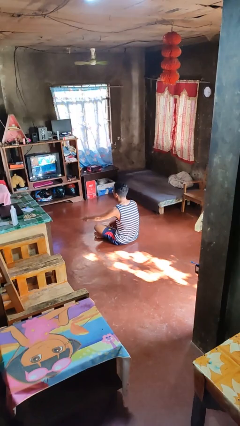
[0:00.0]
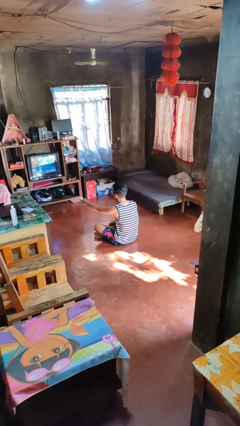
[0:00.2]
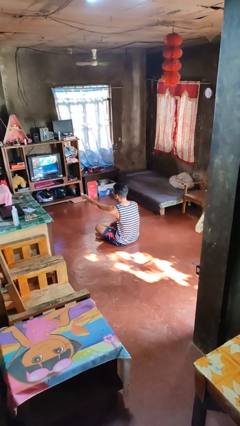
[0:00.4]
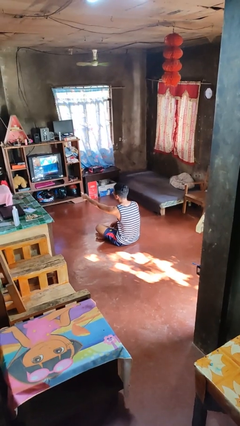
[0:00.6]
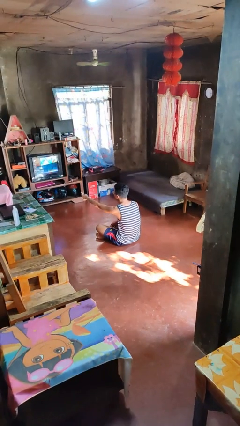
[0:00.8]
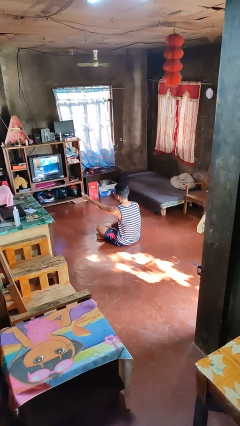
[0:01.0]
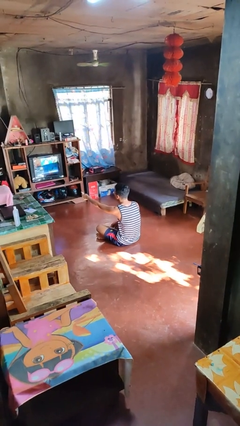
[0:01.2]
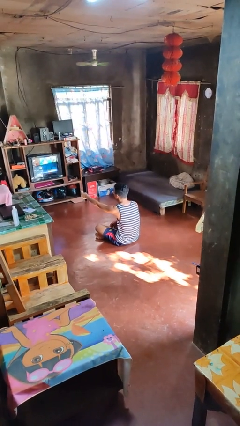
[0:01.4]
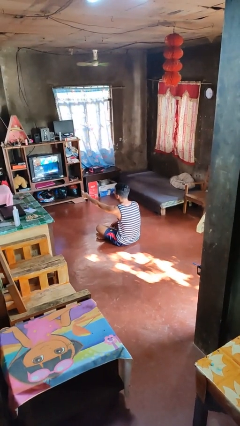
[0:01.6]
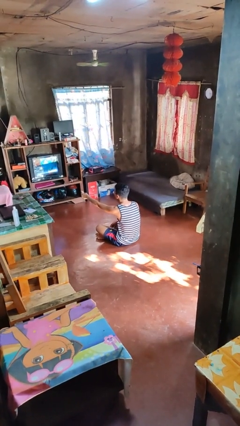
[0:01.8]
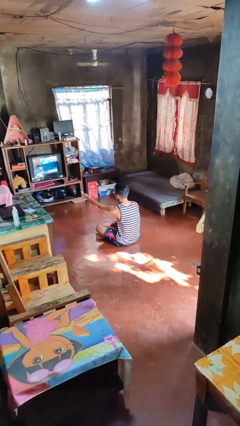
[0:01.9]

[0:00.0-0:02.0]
person uses television remote

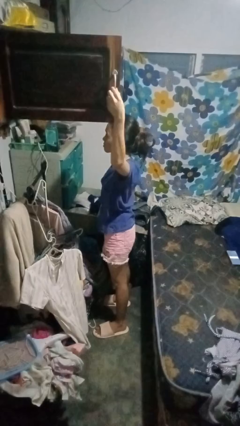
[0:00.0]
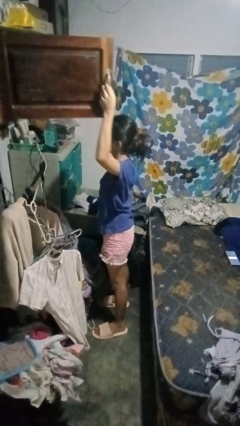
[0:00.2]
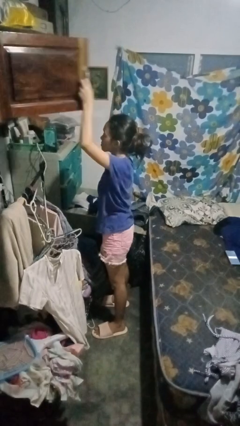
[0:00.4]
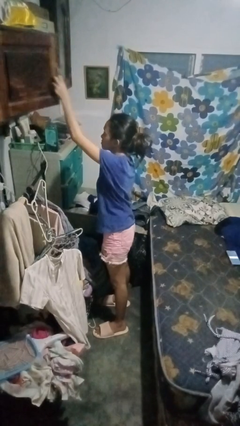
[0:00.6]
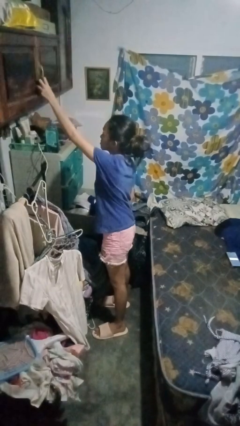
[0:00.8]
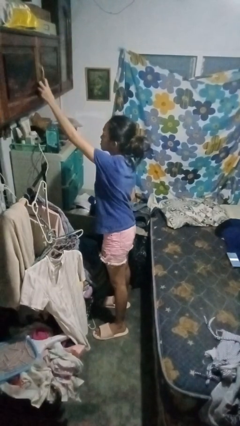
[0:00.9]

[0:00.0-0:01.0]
person closes closet door

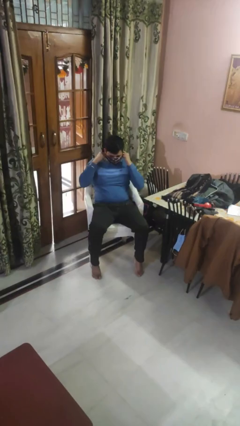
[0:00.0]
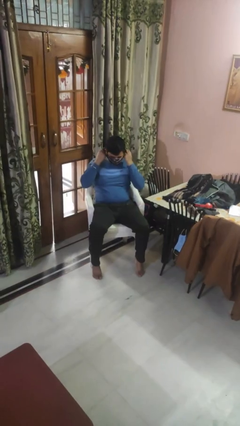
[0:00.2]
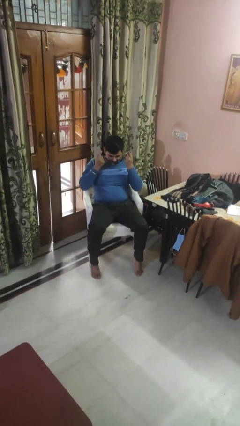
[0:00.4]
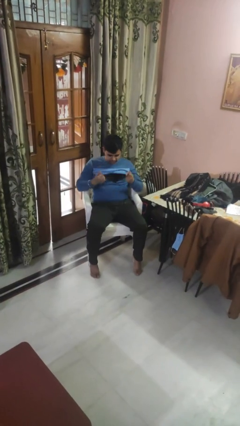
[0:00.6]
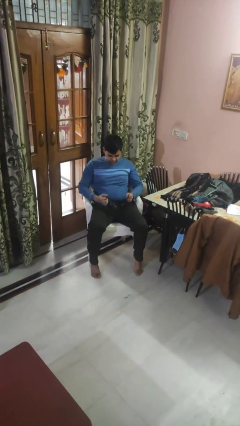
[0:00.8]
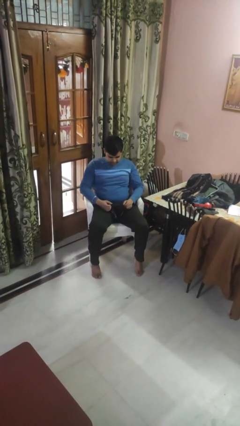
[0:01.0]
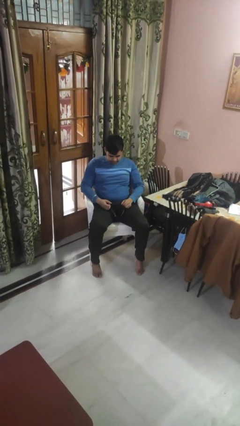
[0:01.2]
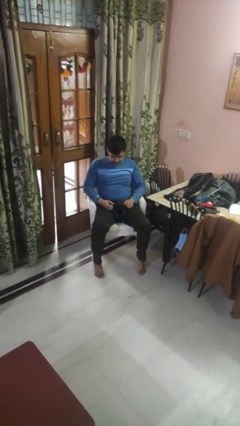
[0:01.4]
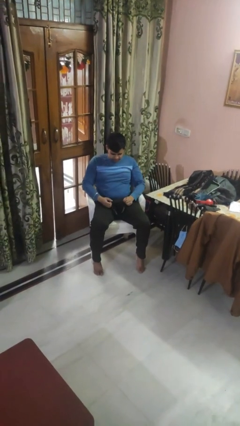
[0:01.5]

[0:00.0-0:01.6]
person takes off facemask

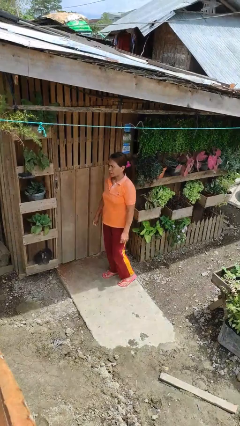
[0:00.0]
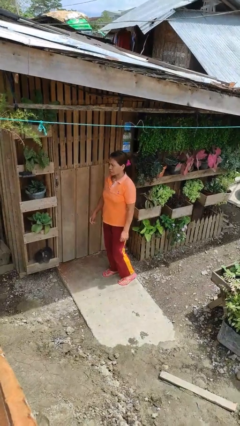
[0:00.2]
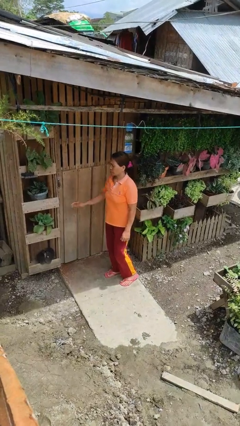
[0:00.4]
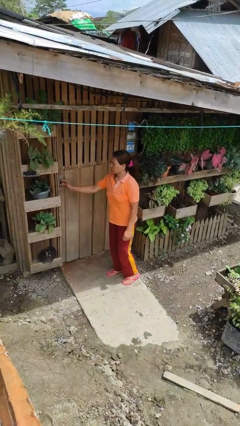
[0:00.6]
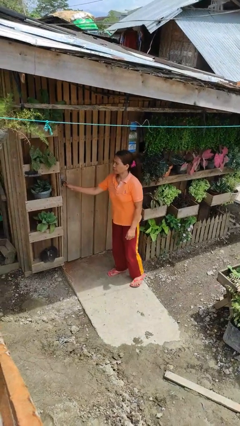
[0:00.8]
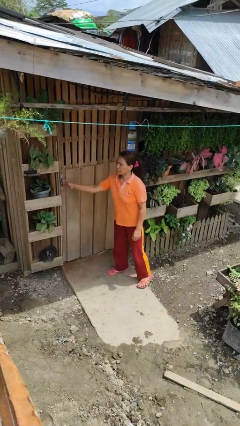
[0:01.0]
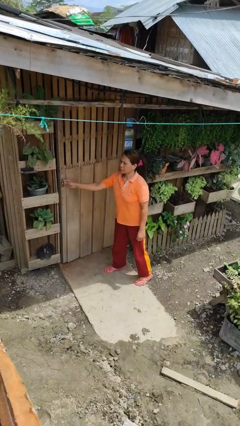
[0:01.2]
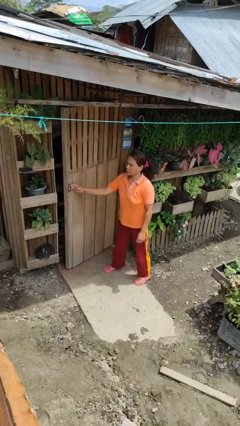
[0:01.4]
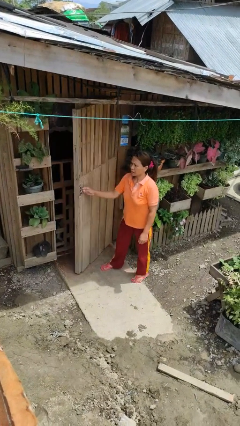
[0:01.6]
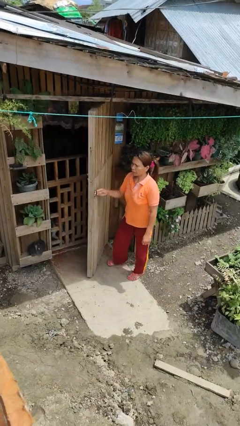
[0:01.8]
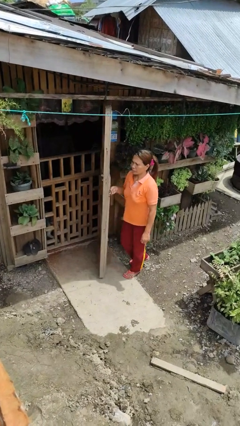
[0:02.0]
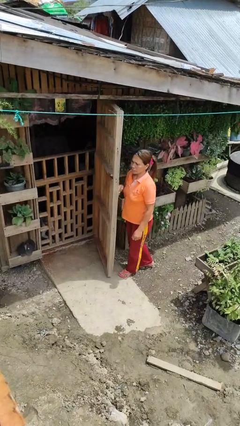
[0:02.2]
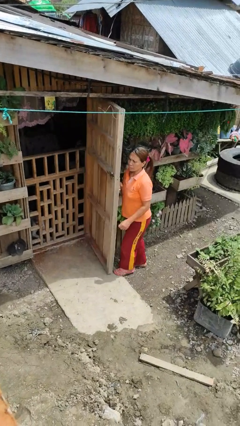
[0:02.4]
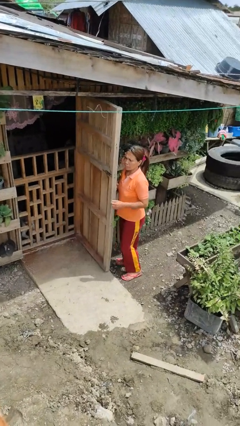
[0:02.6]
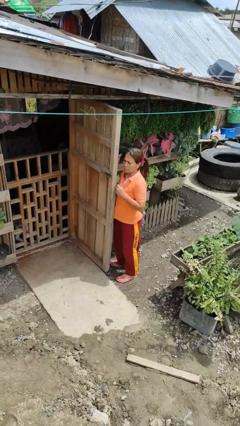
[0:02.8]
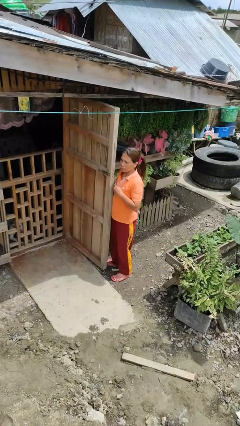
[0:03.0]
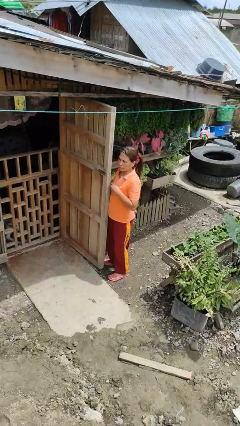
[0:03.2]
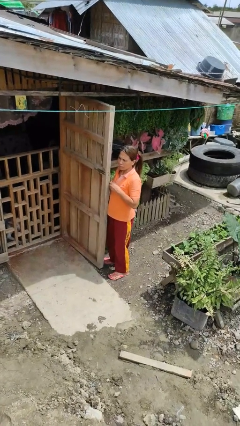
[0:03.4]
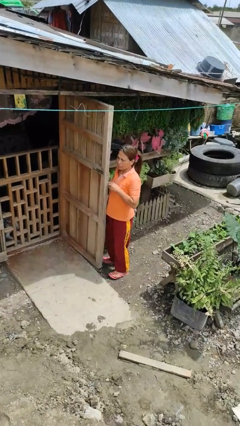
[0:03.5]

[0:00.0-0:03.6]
person opens facility door

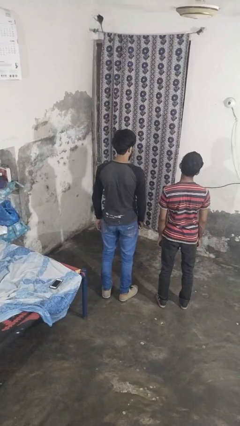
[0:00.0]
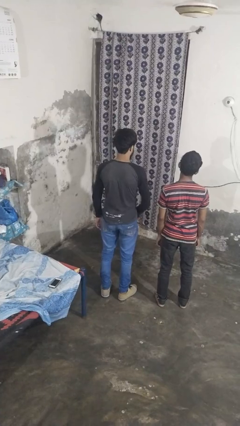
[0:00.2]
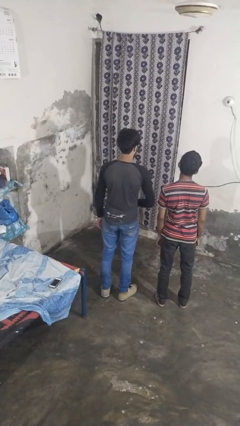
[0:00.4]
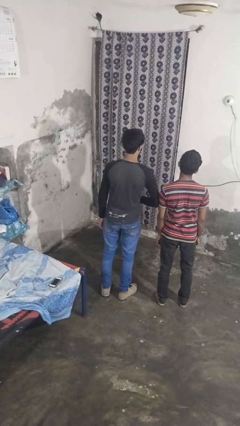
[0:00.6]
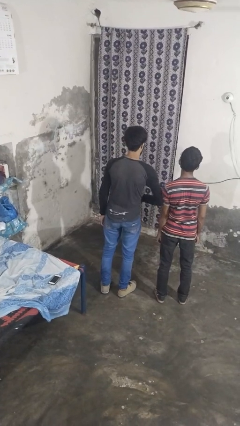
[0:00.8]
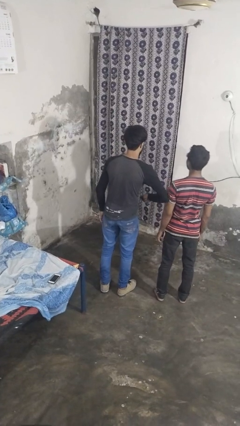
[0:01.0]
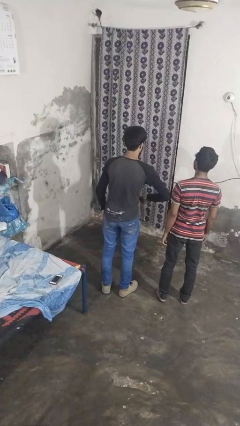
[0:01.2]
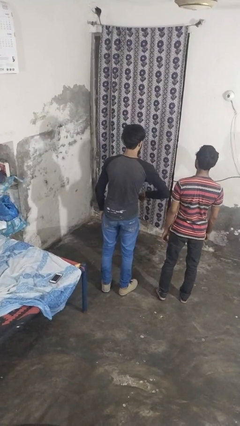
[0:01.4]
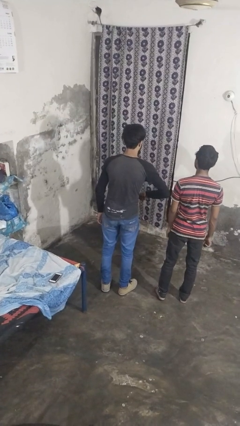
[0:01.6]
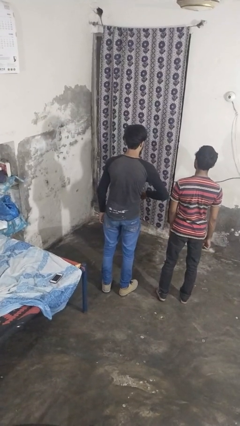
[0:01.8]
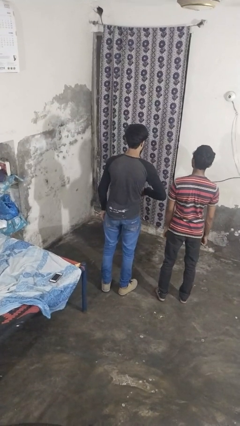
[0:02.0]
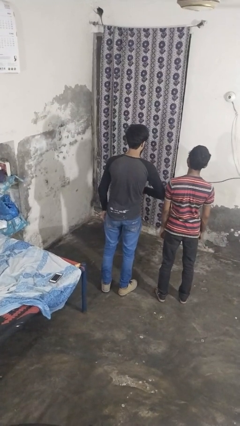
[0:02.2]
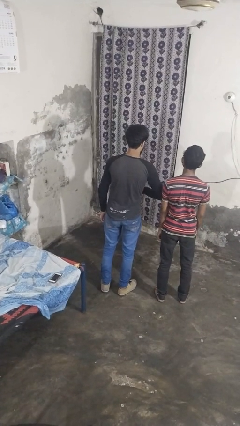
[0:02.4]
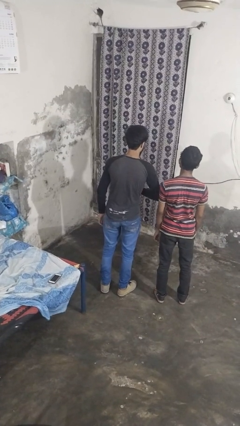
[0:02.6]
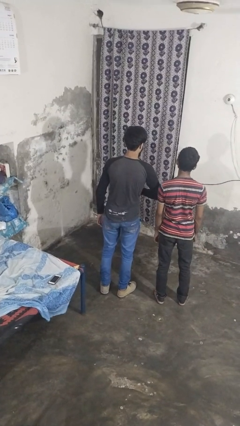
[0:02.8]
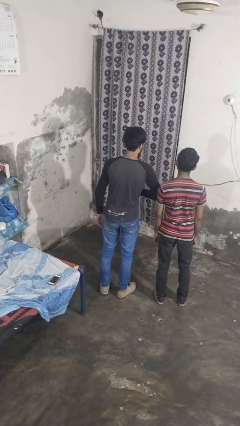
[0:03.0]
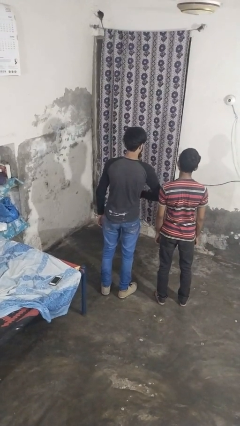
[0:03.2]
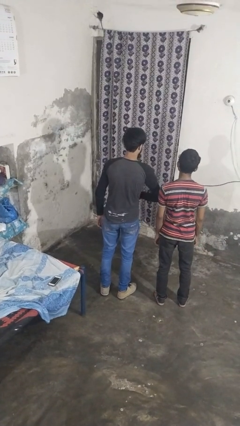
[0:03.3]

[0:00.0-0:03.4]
person nudges person with elbow

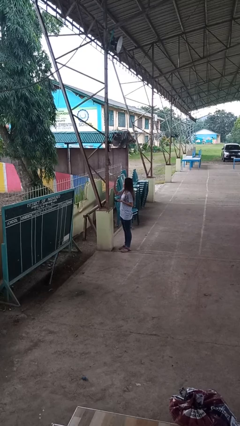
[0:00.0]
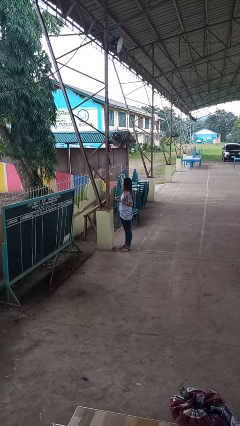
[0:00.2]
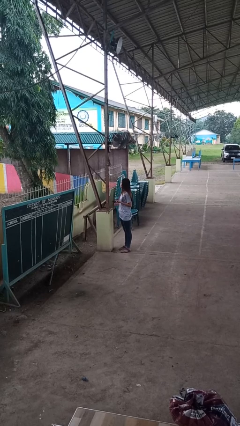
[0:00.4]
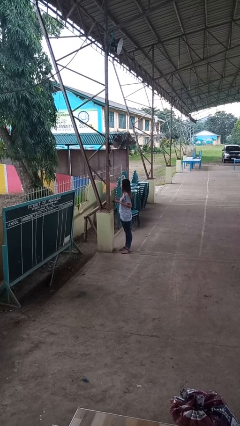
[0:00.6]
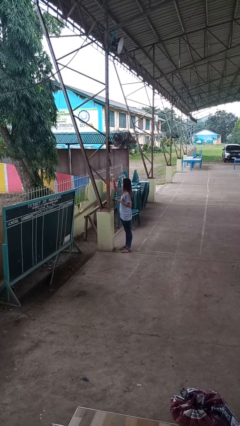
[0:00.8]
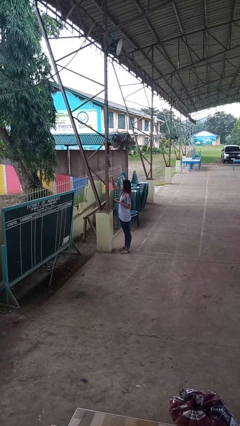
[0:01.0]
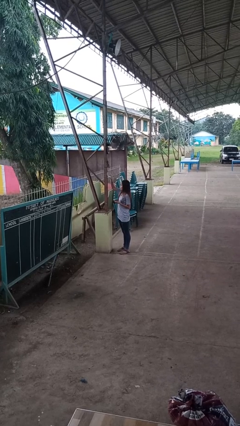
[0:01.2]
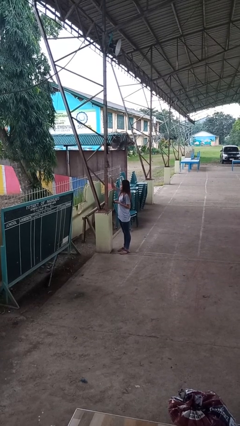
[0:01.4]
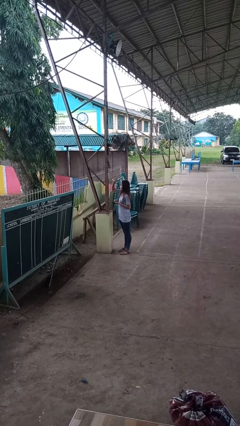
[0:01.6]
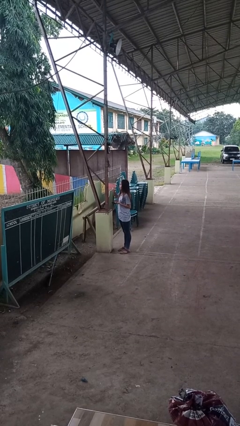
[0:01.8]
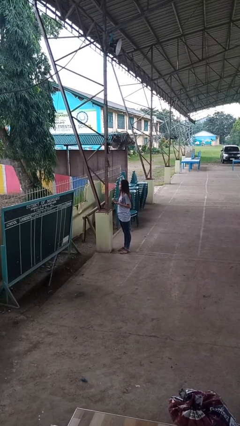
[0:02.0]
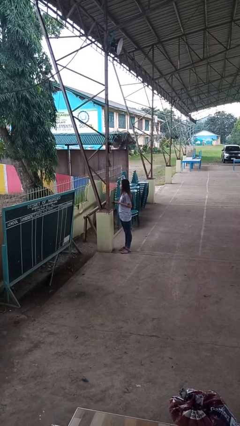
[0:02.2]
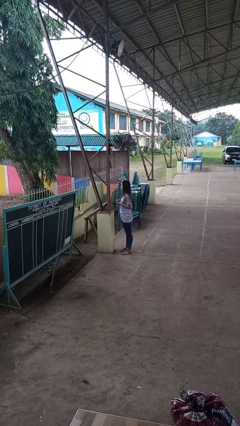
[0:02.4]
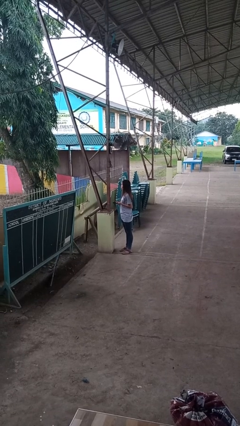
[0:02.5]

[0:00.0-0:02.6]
person unplugs from electrical socket

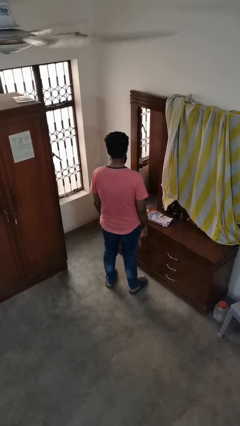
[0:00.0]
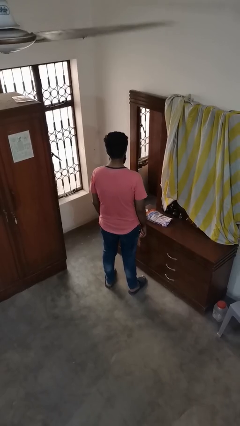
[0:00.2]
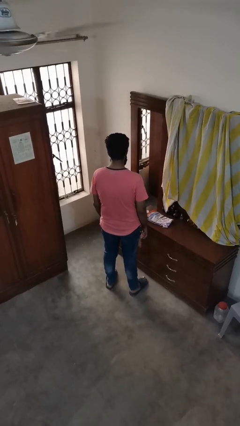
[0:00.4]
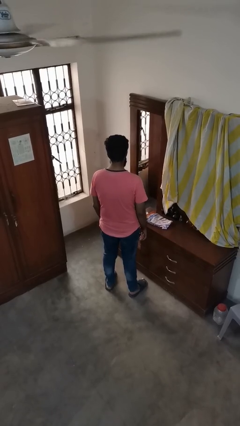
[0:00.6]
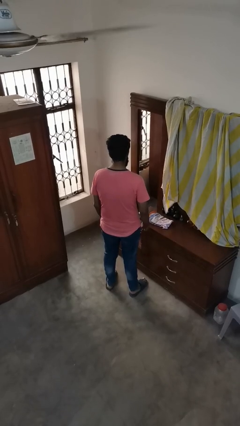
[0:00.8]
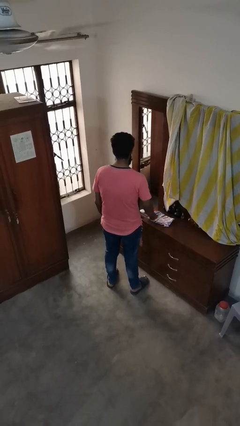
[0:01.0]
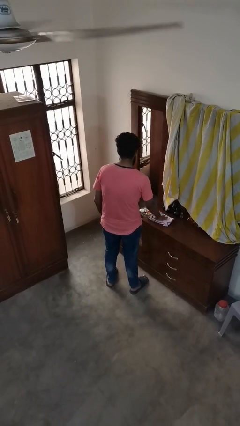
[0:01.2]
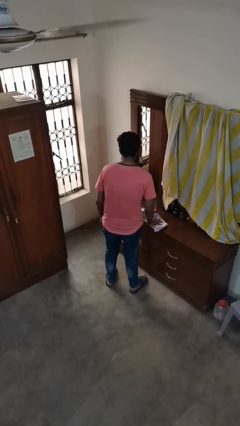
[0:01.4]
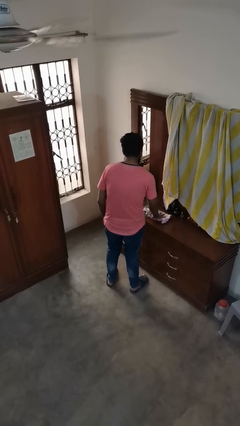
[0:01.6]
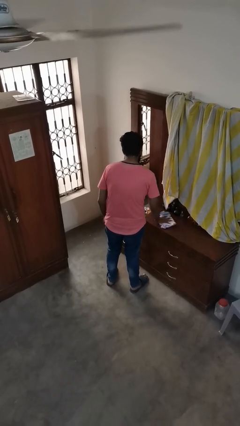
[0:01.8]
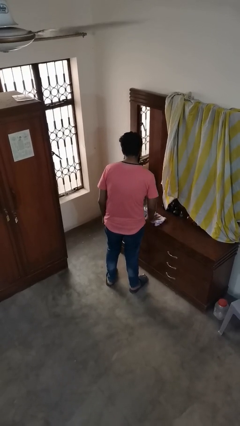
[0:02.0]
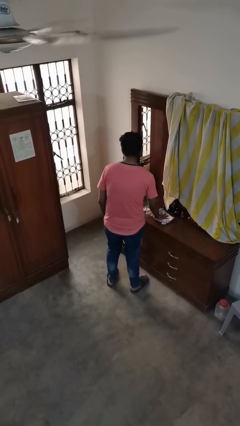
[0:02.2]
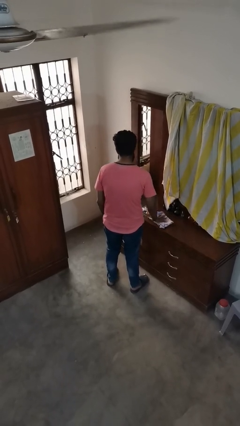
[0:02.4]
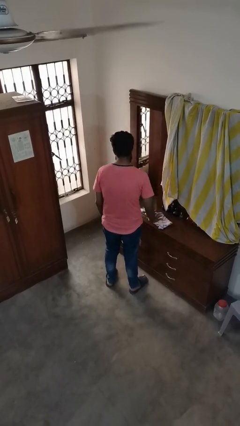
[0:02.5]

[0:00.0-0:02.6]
person cleans table with rag

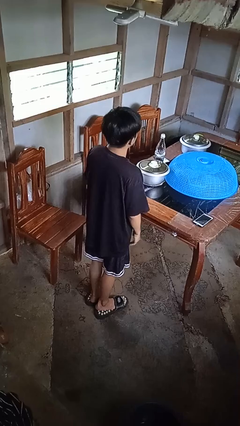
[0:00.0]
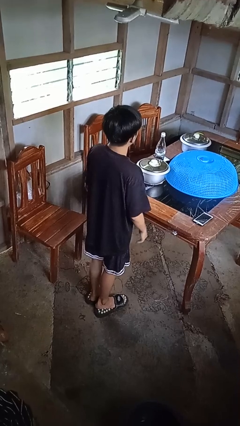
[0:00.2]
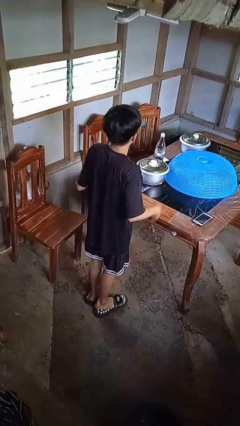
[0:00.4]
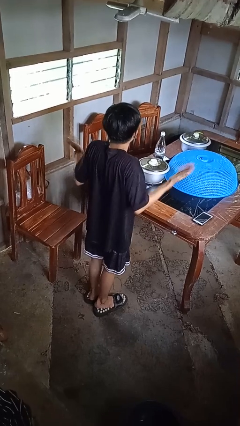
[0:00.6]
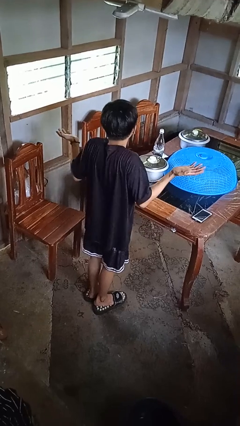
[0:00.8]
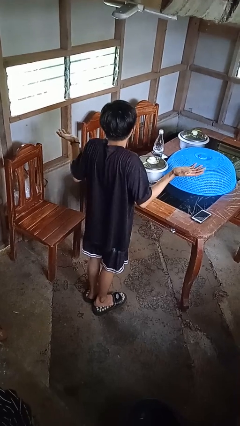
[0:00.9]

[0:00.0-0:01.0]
person shrugs
